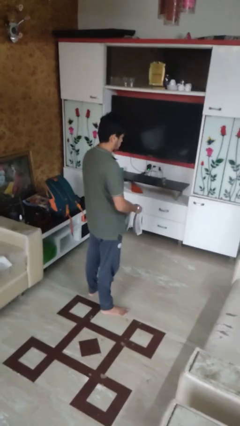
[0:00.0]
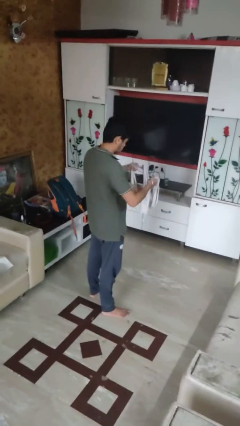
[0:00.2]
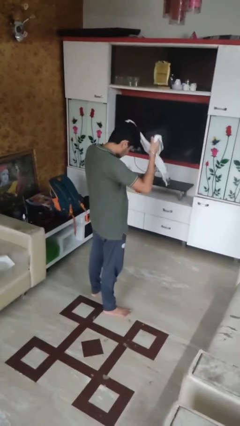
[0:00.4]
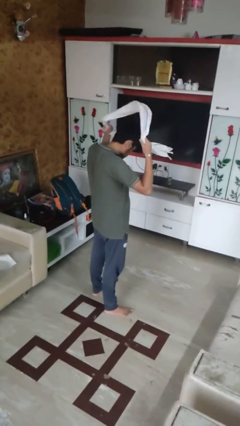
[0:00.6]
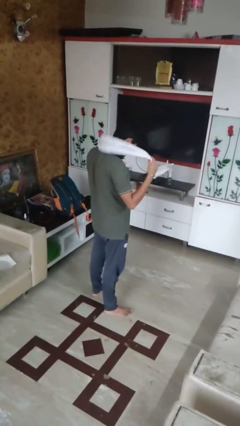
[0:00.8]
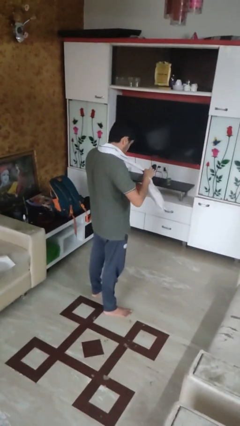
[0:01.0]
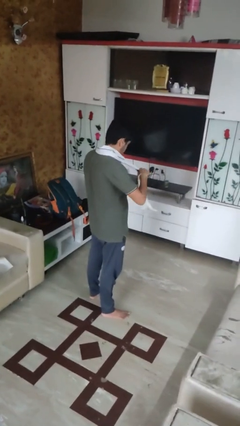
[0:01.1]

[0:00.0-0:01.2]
person puts on scarf

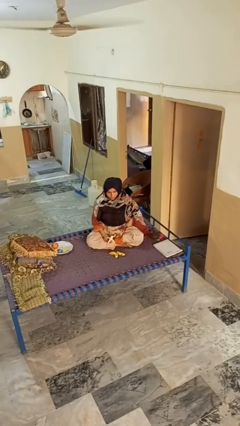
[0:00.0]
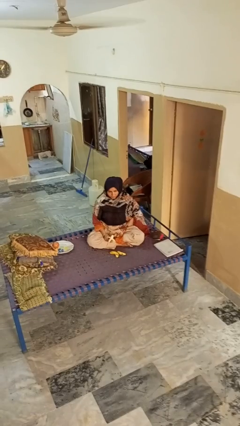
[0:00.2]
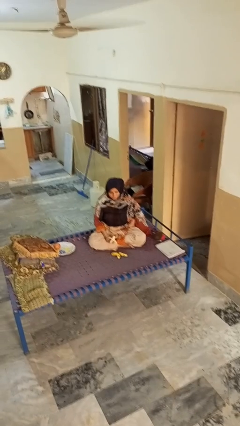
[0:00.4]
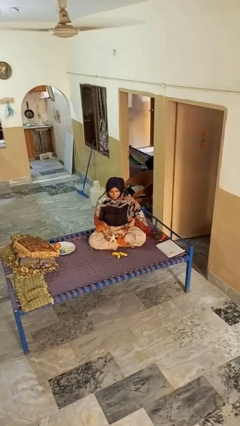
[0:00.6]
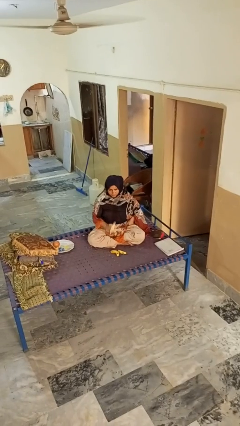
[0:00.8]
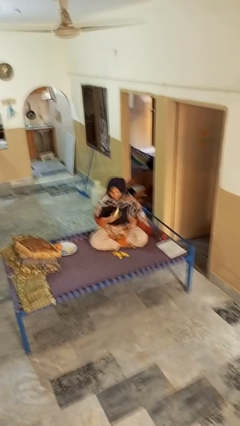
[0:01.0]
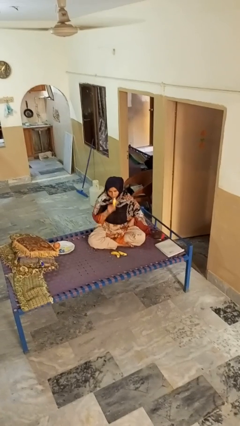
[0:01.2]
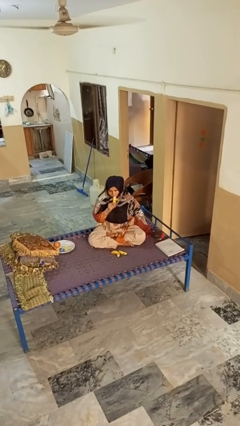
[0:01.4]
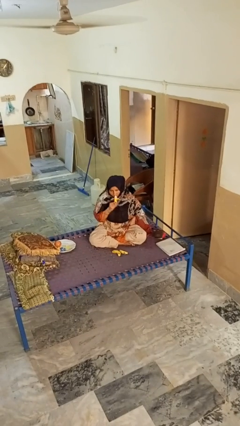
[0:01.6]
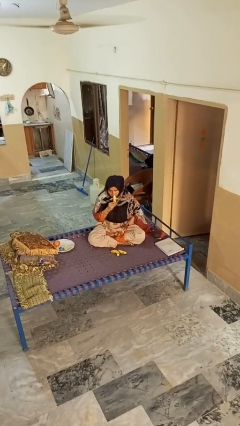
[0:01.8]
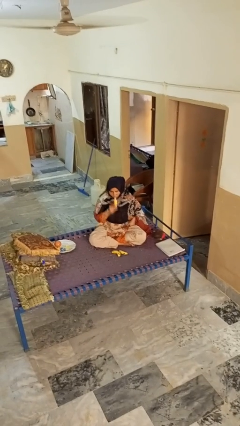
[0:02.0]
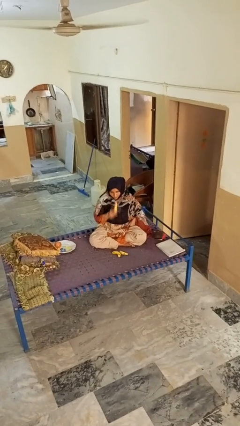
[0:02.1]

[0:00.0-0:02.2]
person eats banana

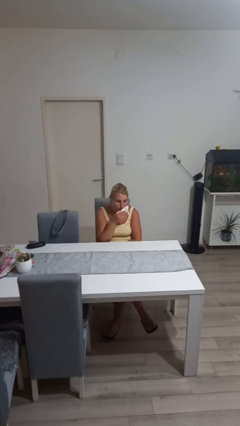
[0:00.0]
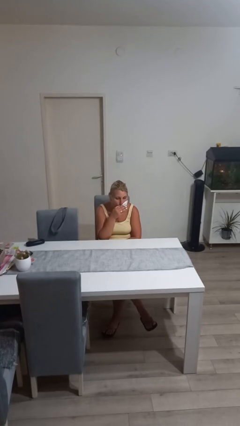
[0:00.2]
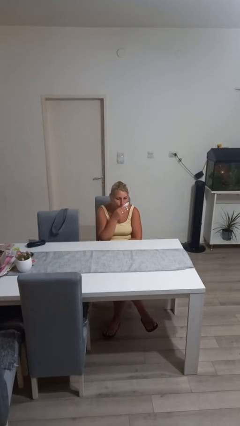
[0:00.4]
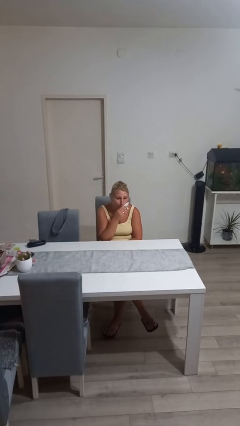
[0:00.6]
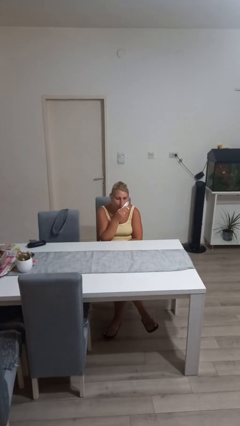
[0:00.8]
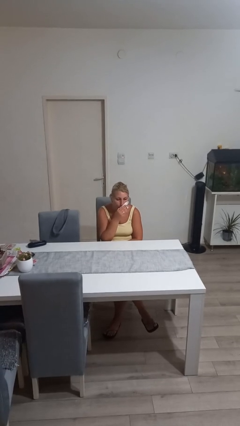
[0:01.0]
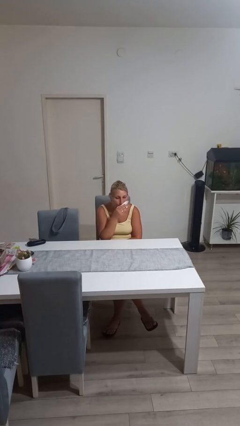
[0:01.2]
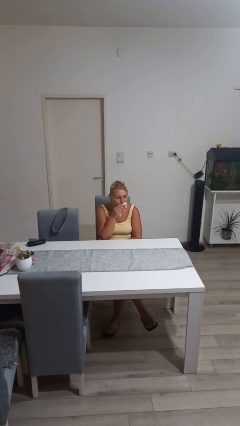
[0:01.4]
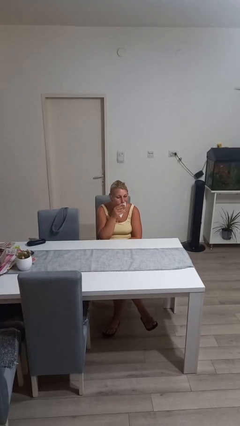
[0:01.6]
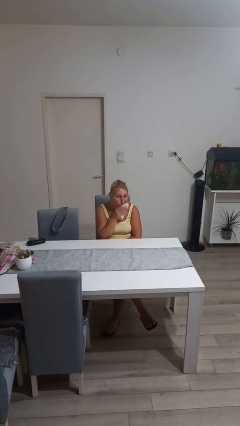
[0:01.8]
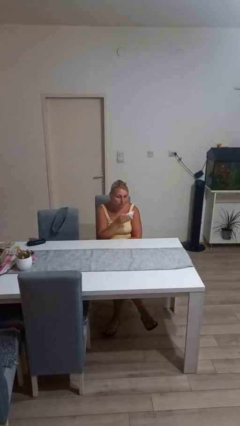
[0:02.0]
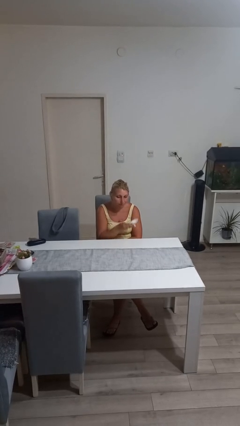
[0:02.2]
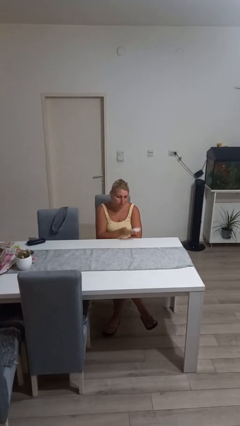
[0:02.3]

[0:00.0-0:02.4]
person wipes mouth with napkin

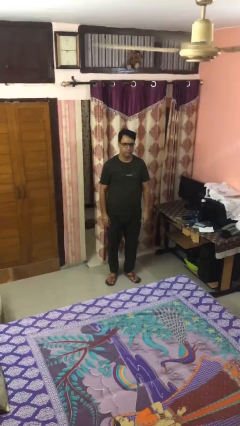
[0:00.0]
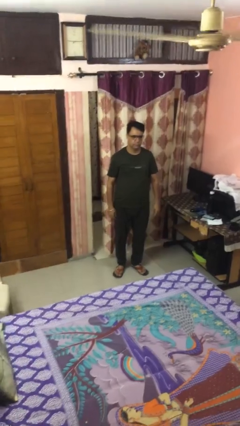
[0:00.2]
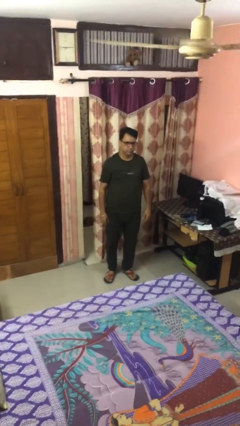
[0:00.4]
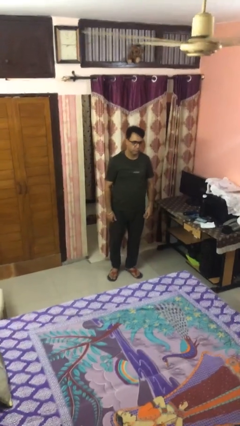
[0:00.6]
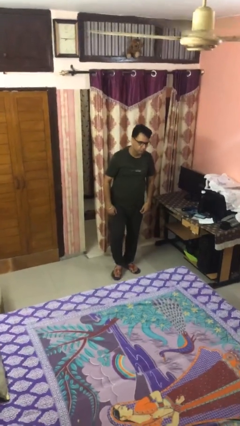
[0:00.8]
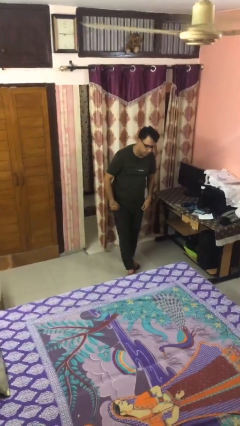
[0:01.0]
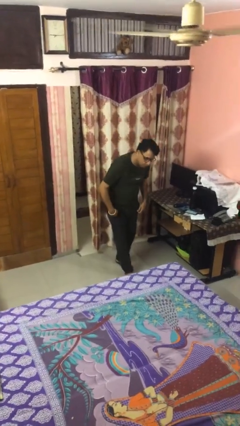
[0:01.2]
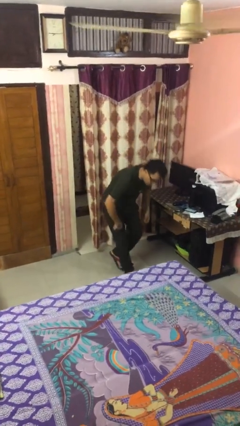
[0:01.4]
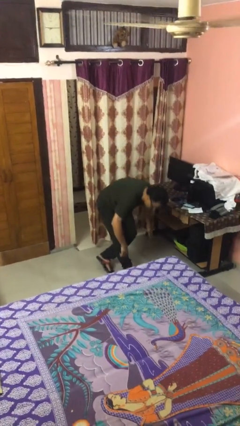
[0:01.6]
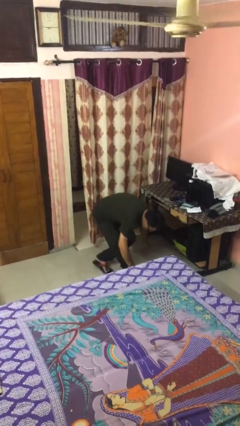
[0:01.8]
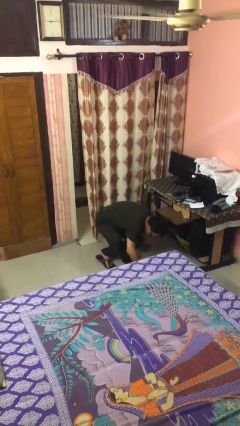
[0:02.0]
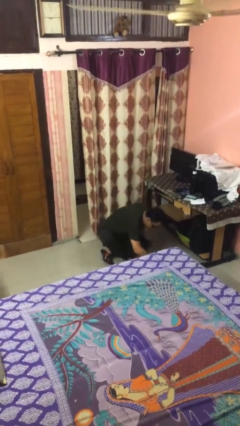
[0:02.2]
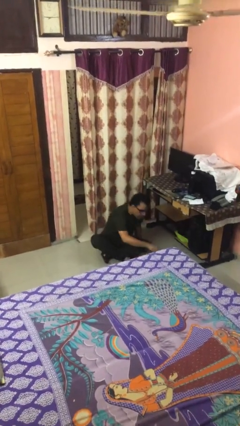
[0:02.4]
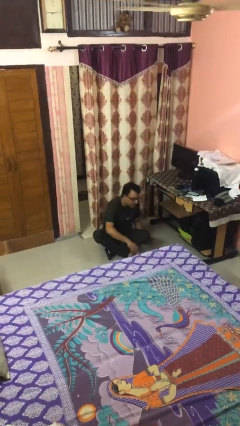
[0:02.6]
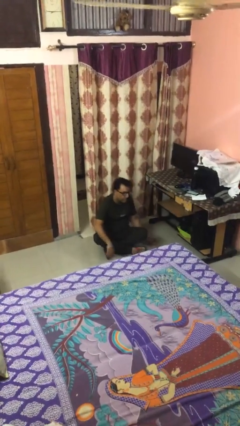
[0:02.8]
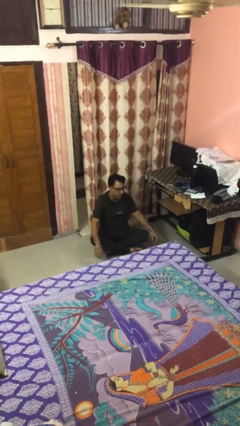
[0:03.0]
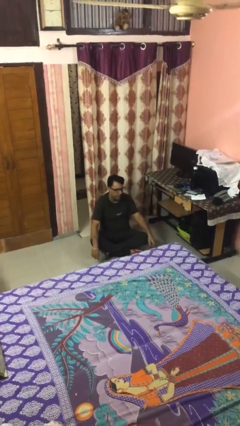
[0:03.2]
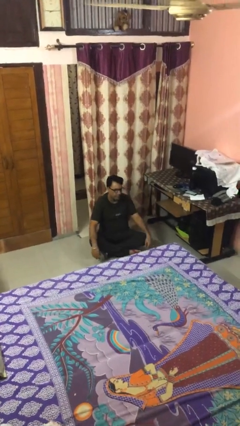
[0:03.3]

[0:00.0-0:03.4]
person sits crisscross

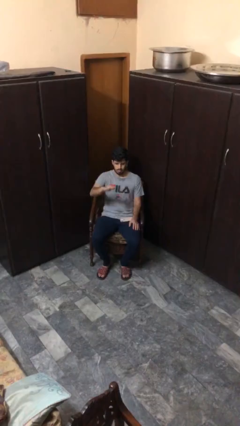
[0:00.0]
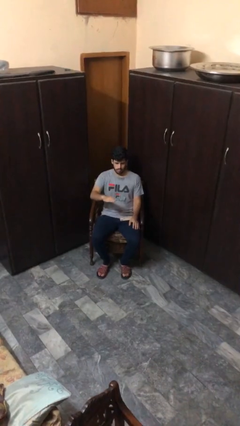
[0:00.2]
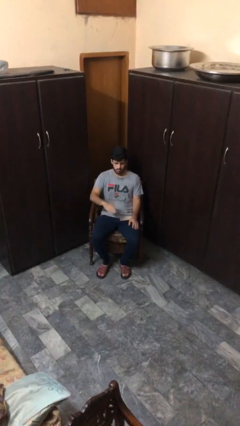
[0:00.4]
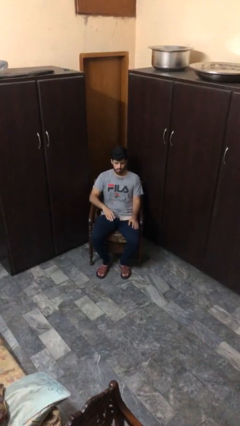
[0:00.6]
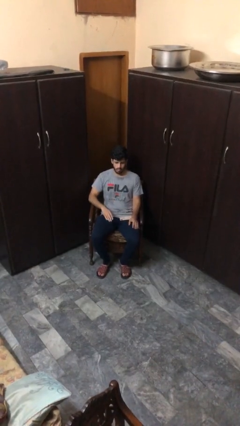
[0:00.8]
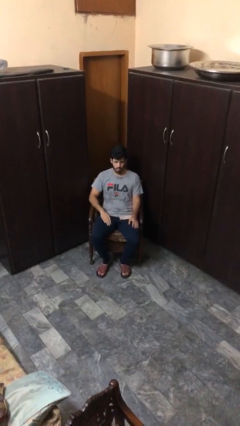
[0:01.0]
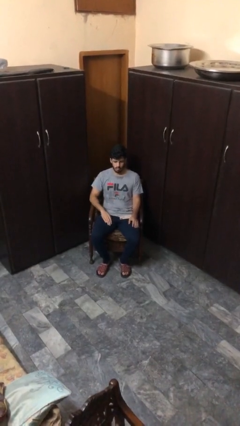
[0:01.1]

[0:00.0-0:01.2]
person gestures swipe down

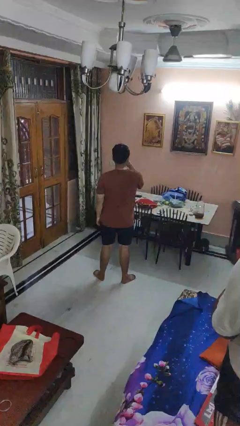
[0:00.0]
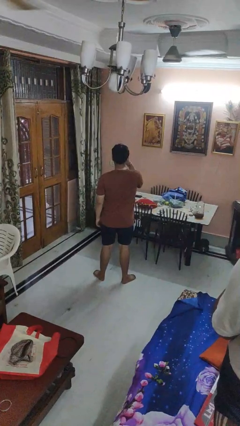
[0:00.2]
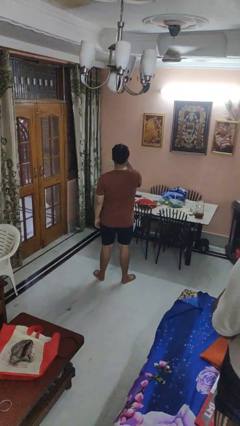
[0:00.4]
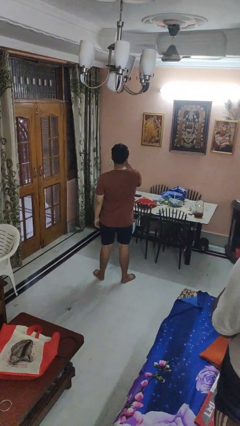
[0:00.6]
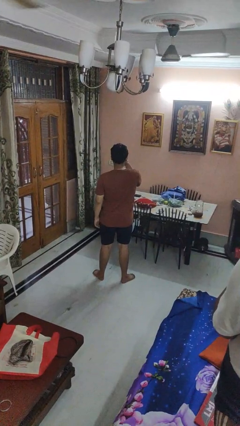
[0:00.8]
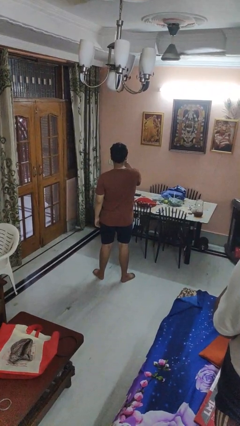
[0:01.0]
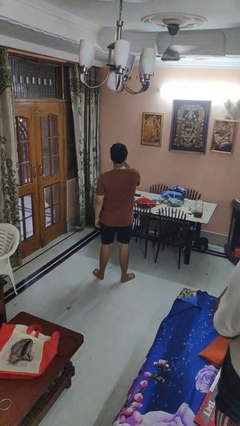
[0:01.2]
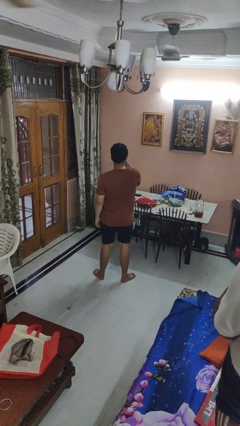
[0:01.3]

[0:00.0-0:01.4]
person gestures watch closely

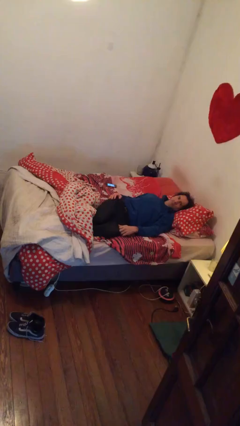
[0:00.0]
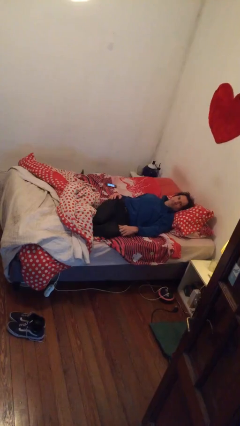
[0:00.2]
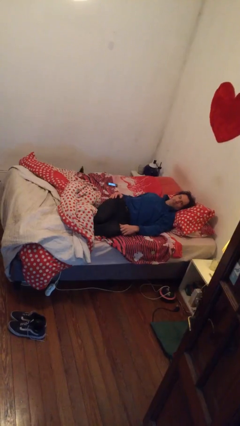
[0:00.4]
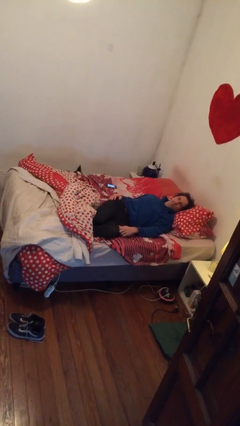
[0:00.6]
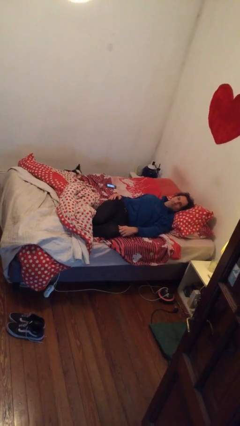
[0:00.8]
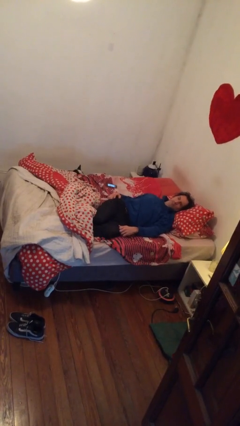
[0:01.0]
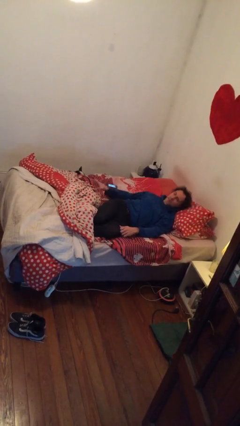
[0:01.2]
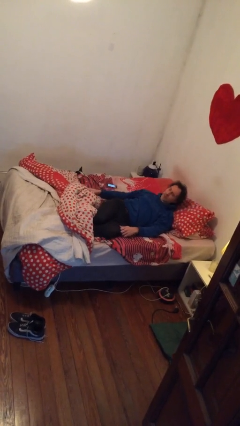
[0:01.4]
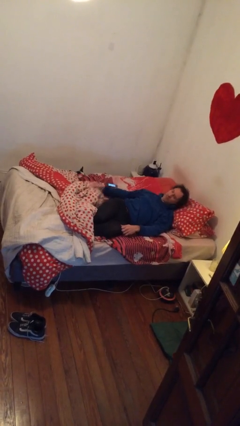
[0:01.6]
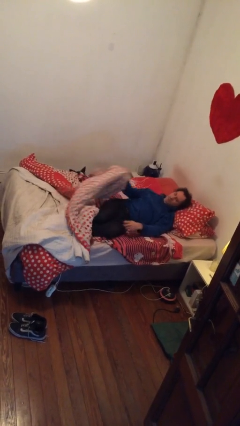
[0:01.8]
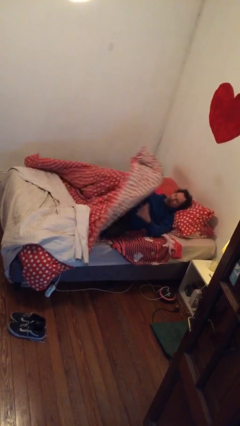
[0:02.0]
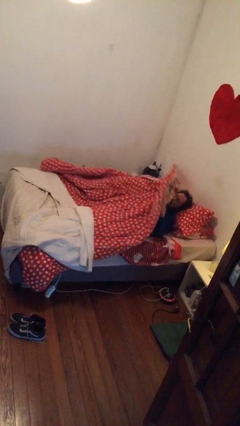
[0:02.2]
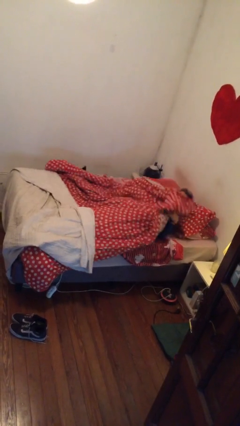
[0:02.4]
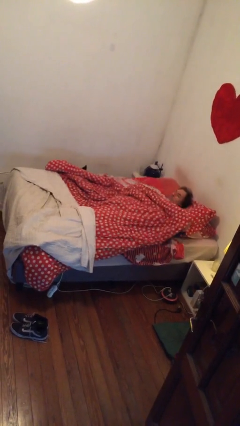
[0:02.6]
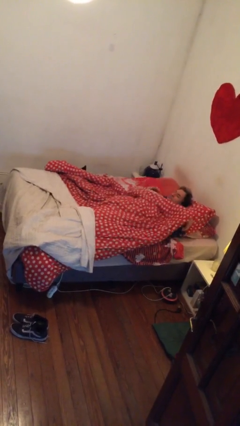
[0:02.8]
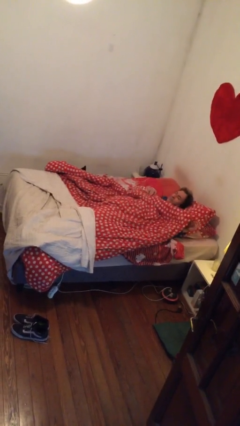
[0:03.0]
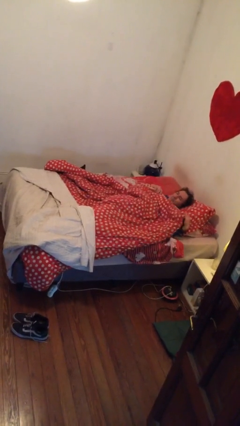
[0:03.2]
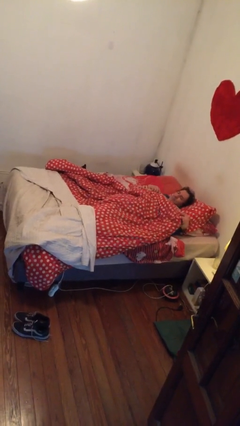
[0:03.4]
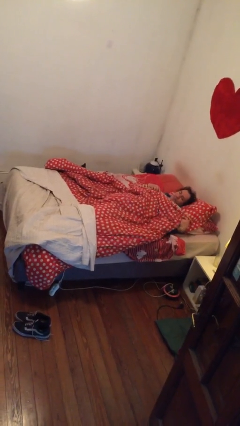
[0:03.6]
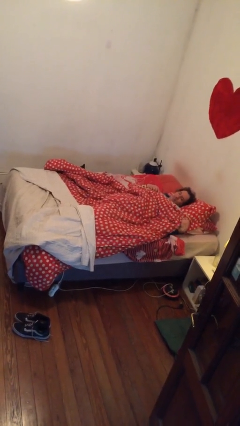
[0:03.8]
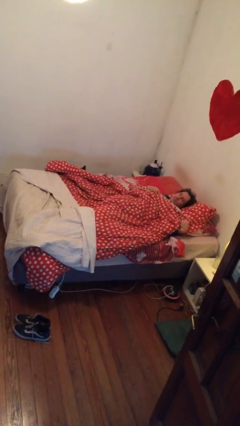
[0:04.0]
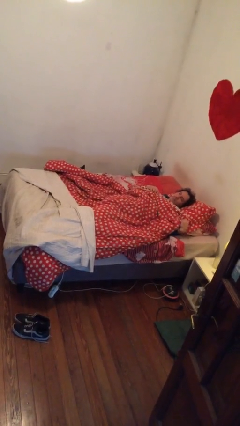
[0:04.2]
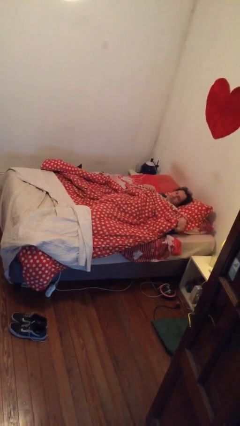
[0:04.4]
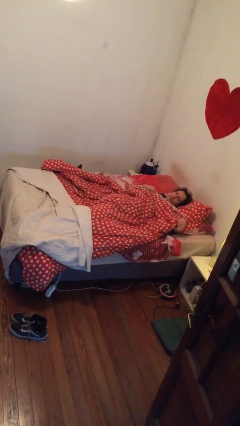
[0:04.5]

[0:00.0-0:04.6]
person covers with bedsheets

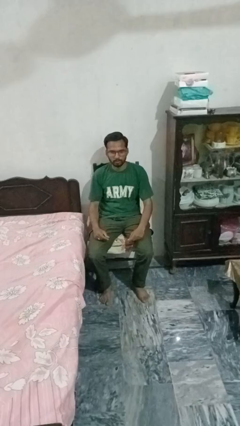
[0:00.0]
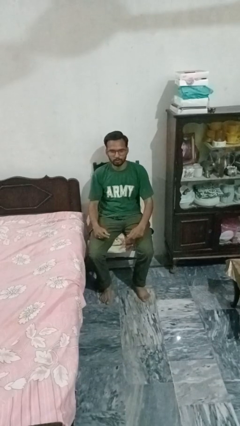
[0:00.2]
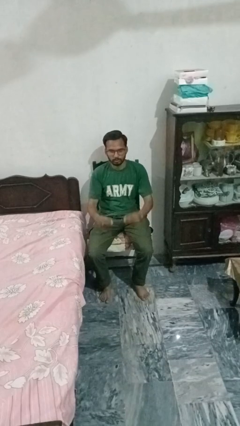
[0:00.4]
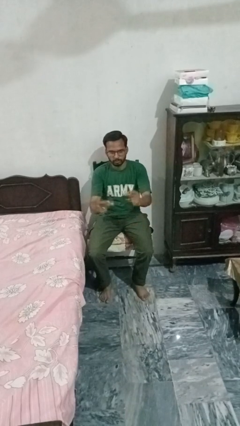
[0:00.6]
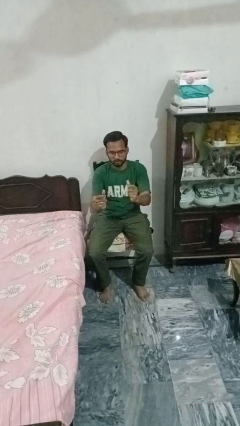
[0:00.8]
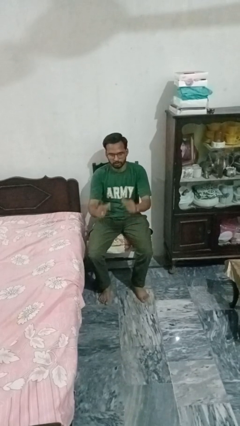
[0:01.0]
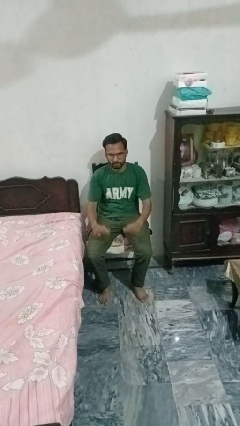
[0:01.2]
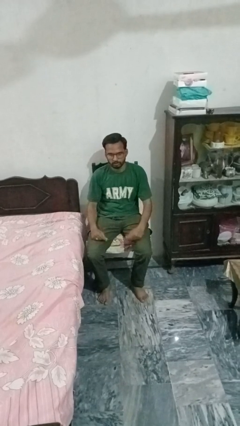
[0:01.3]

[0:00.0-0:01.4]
person snaps fingers
